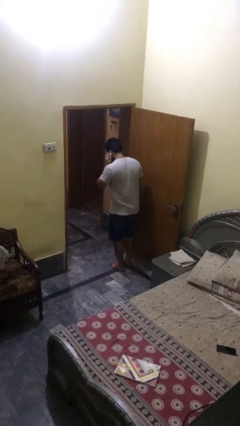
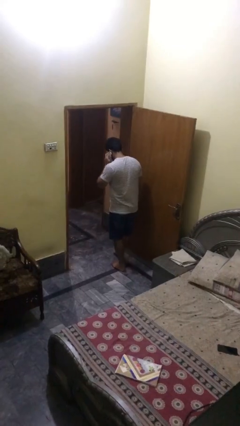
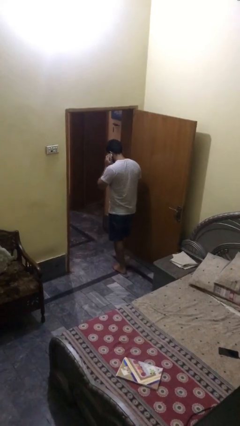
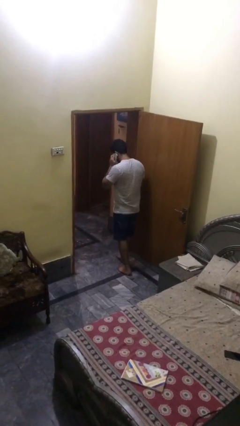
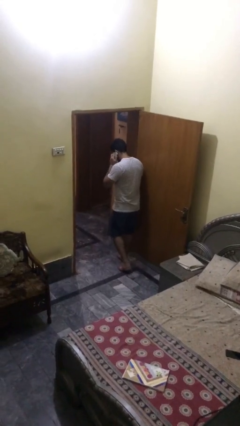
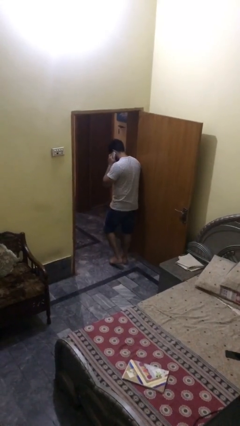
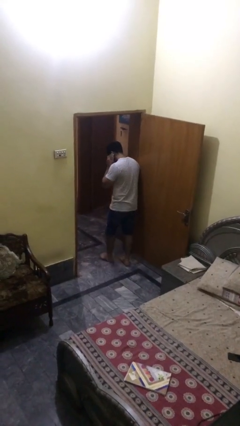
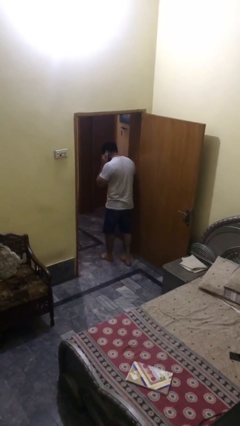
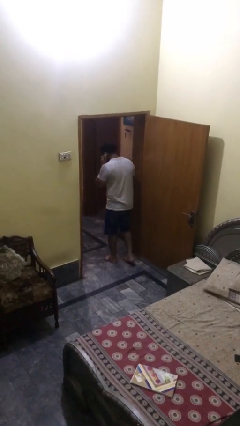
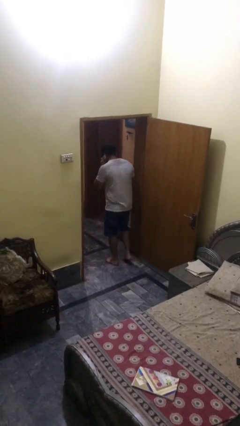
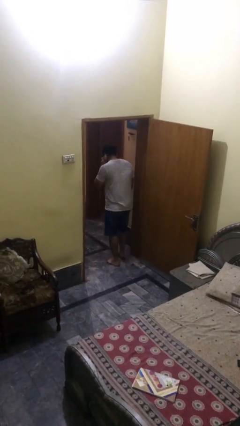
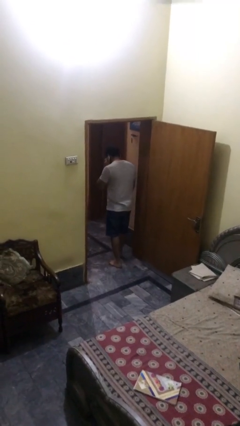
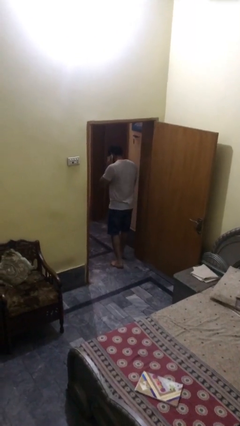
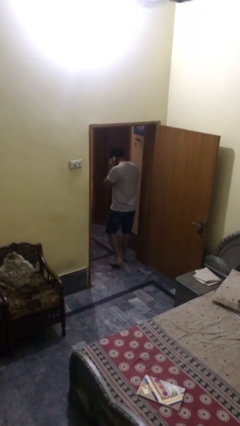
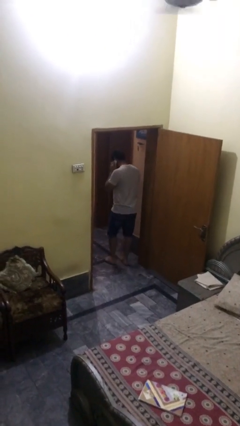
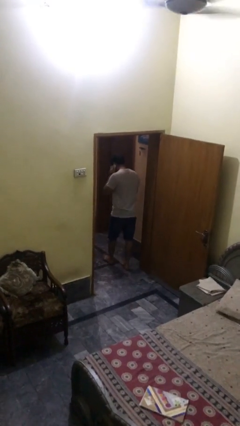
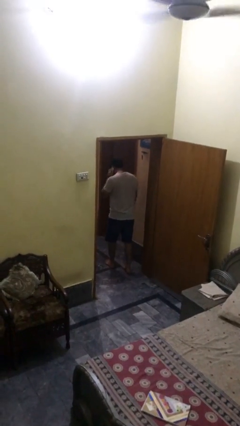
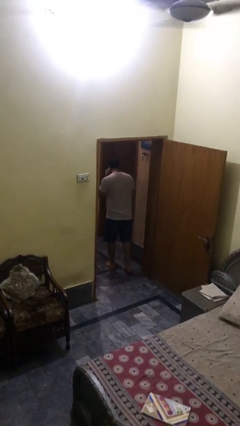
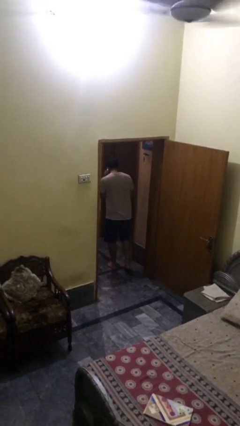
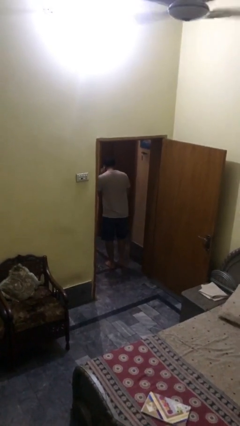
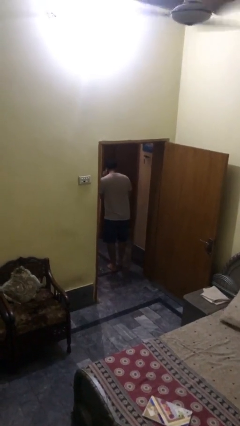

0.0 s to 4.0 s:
person exits scene through structure

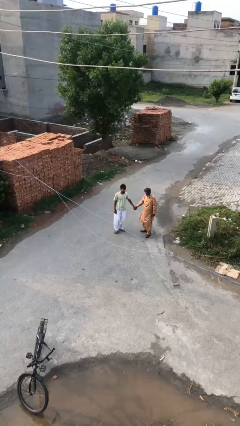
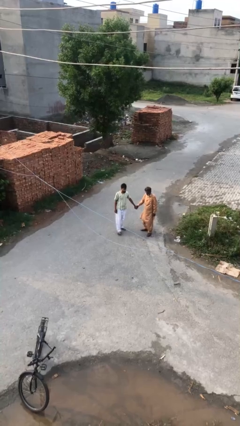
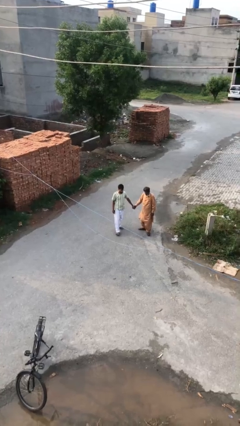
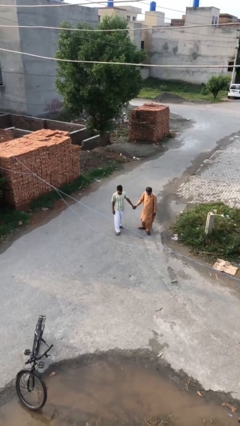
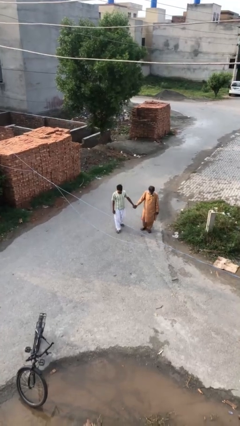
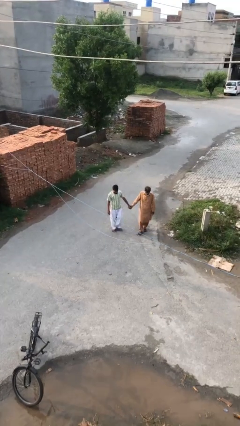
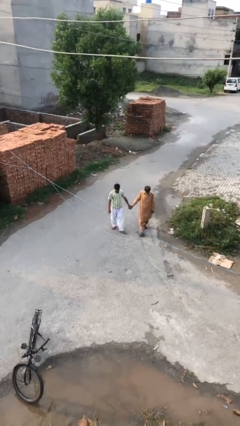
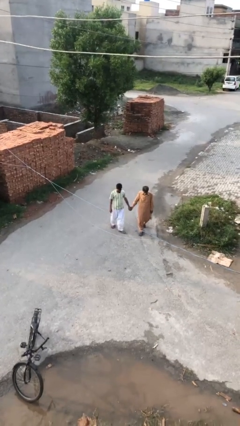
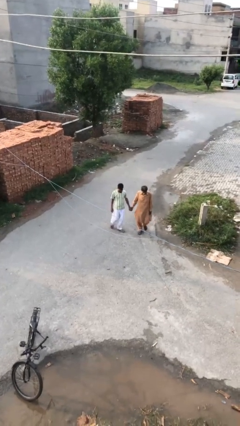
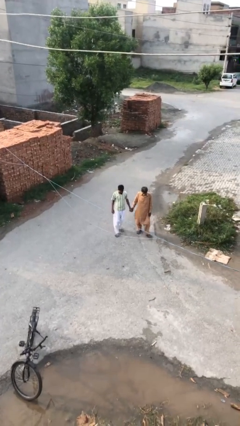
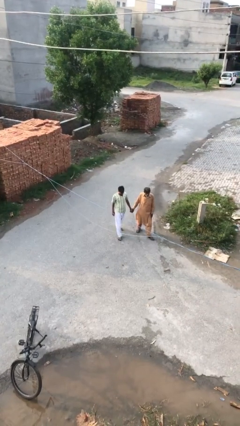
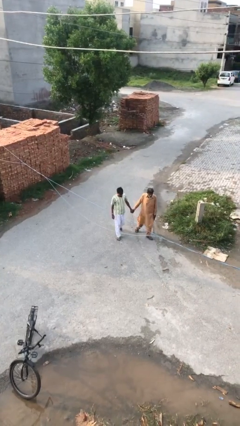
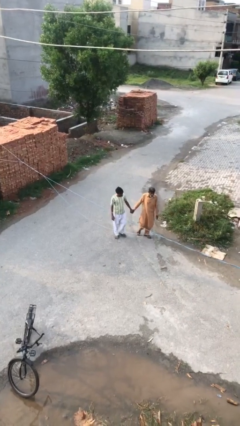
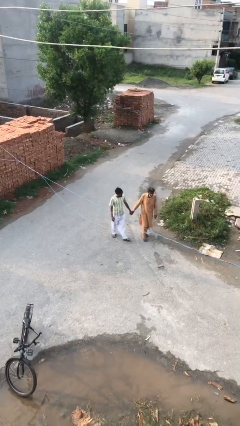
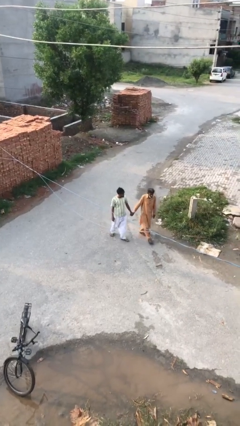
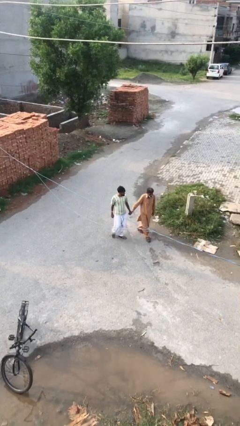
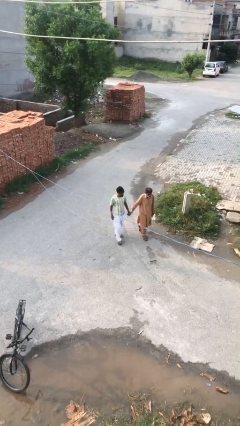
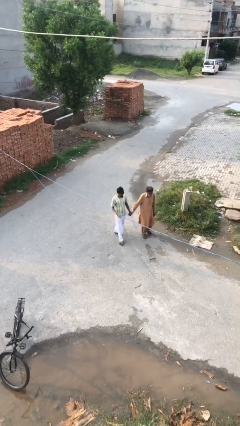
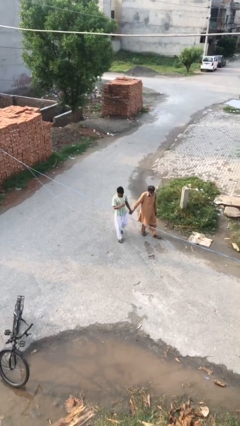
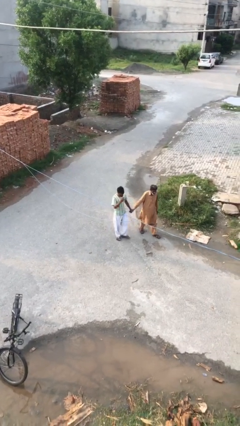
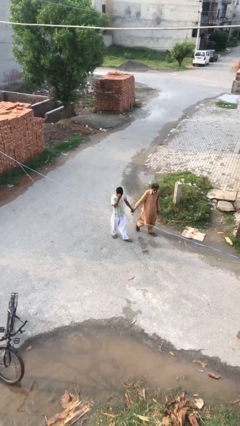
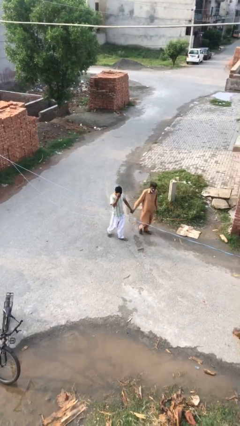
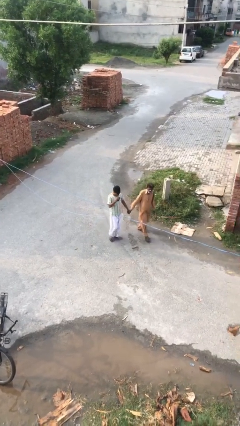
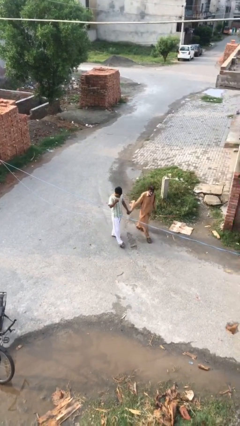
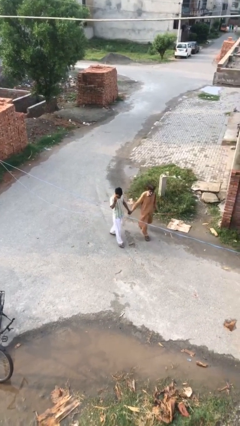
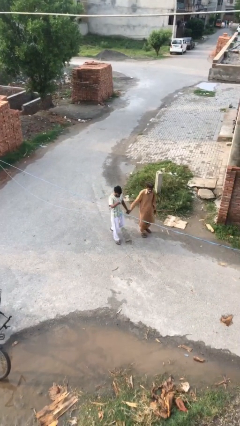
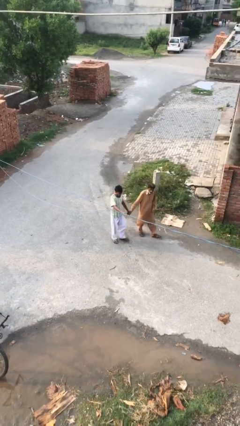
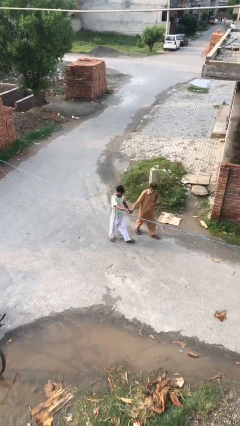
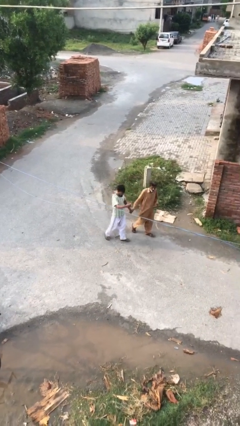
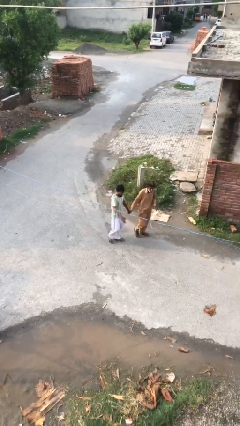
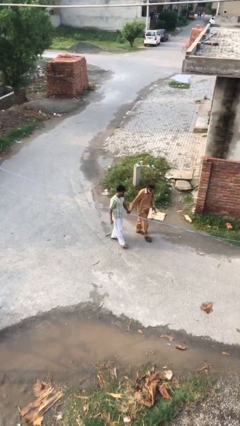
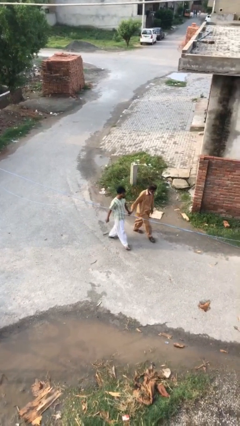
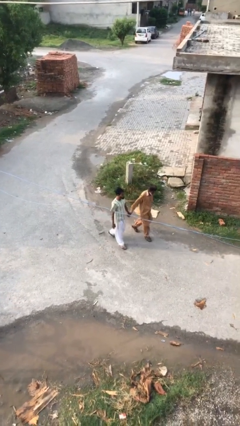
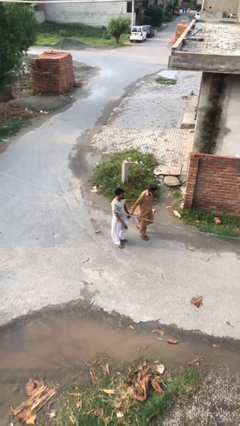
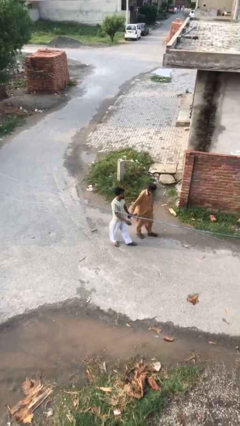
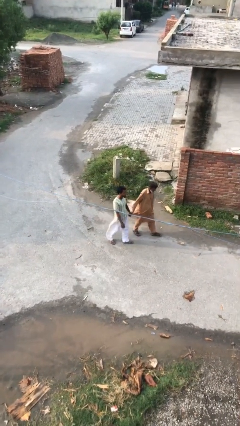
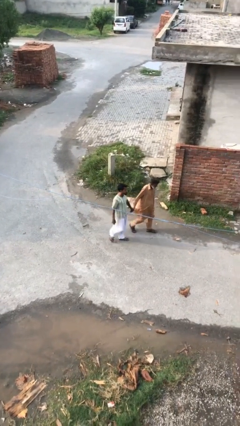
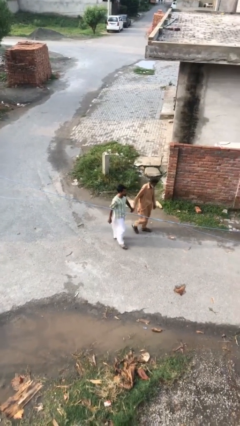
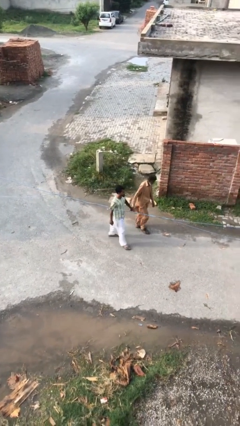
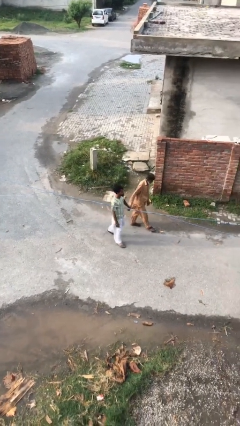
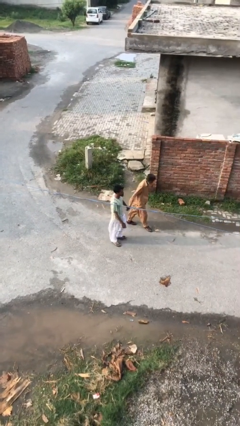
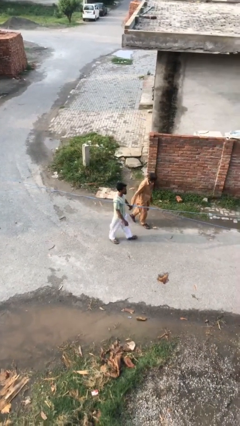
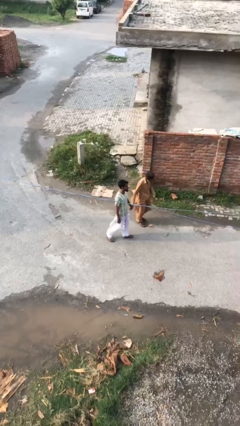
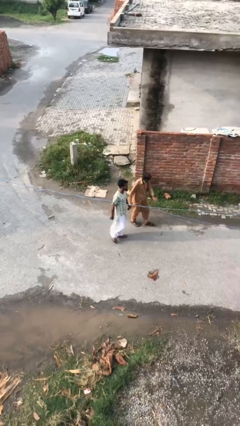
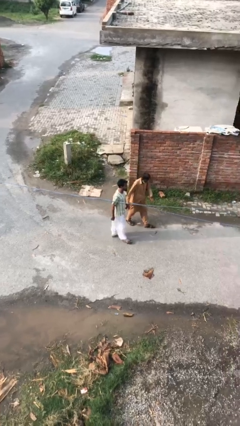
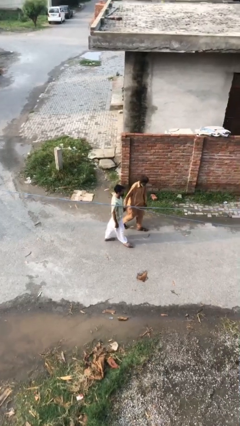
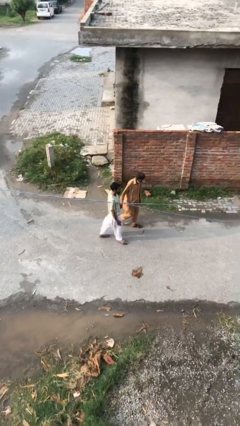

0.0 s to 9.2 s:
person holds hand

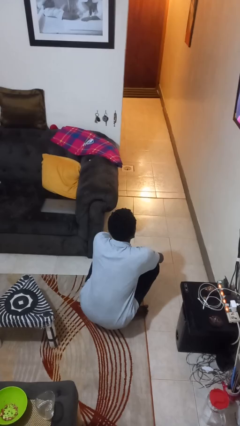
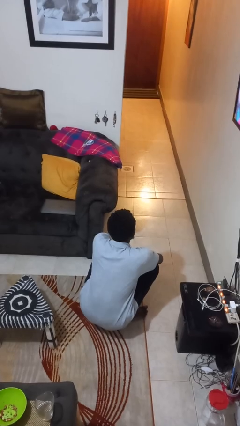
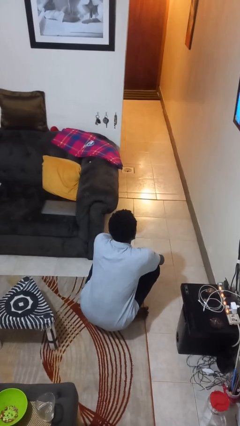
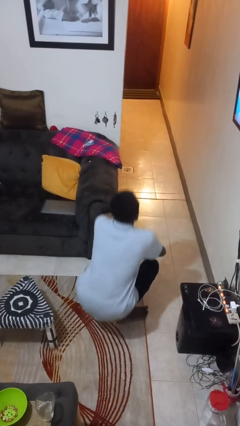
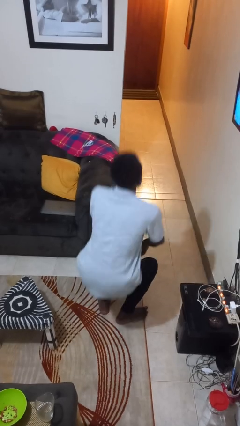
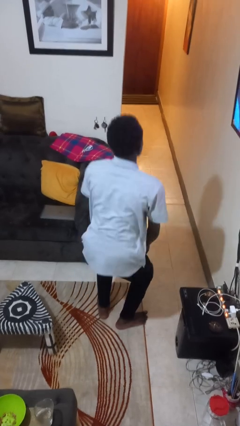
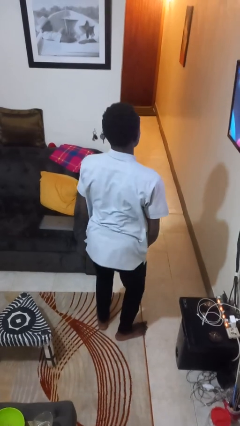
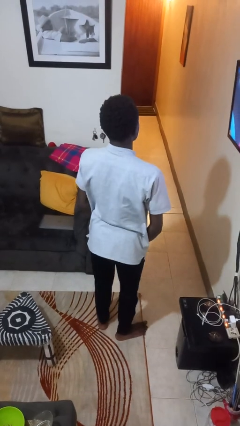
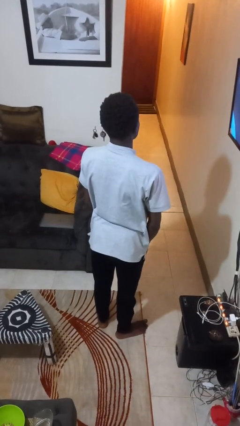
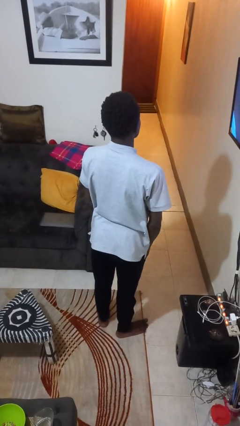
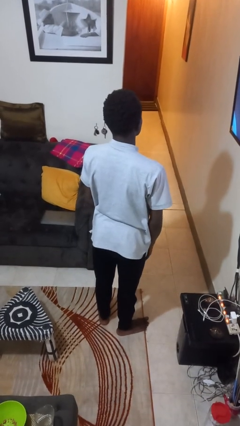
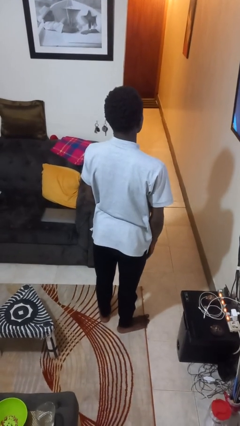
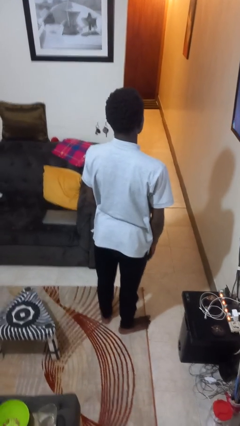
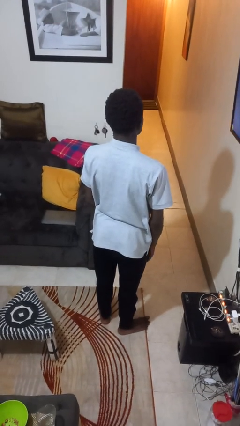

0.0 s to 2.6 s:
person stands up

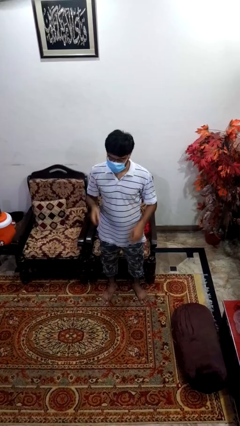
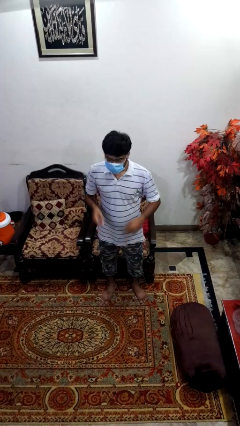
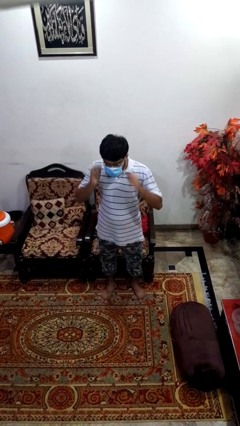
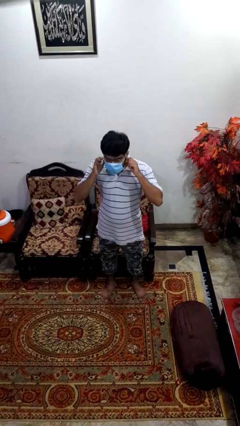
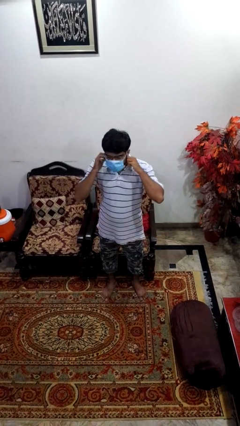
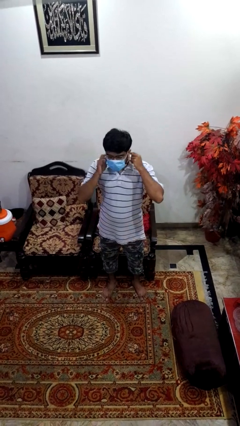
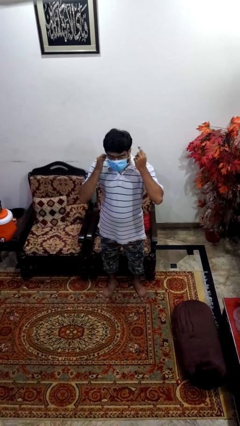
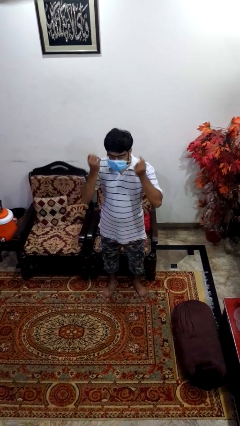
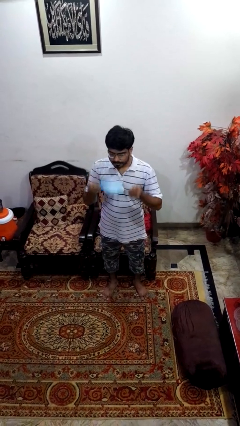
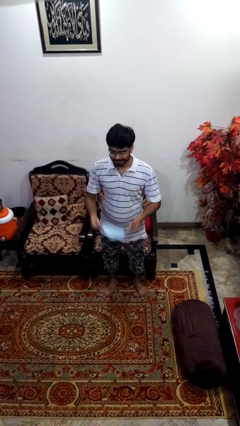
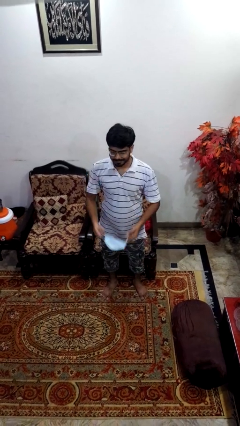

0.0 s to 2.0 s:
person takes off facemask

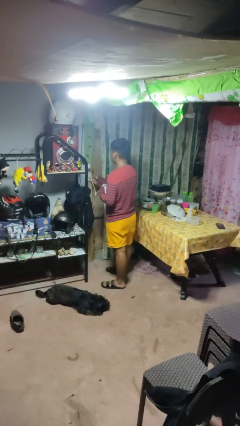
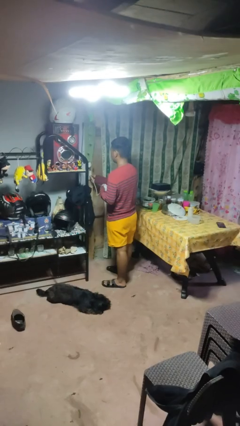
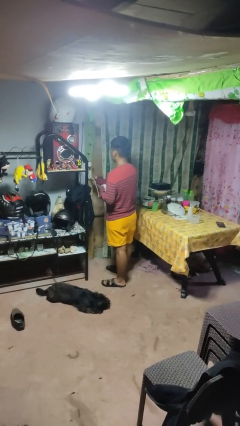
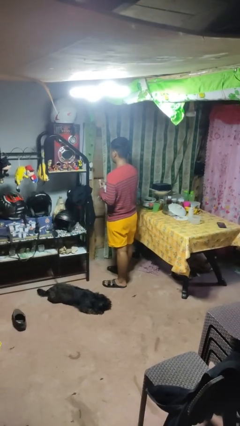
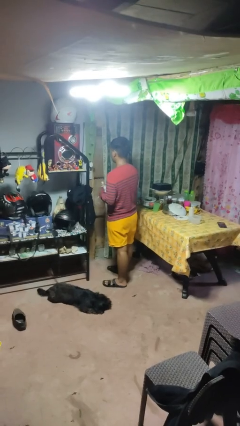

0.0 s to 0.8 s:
person unplugs from electrical socket
